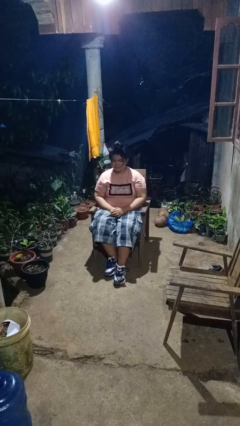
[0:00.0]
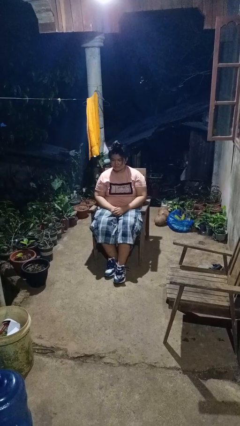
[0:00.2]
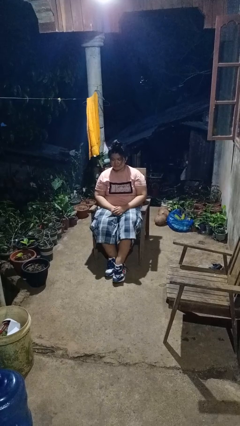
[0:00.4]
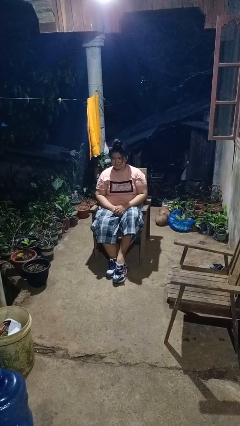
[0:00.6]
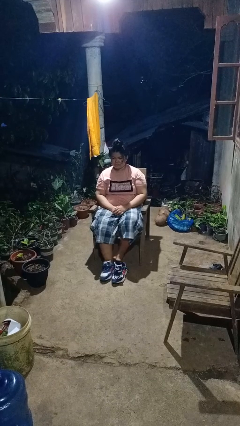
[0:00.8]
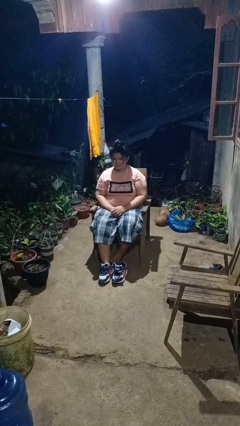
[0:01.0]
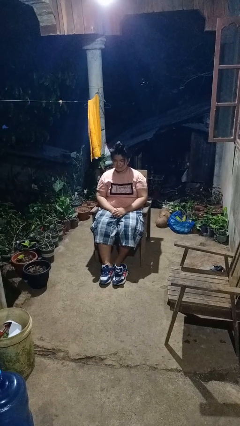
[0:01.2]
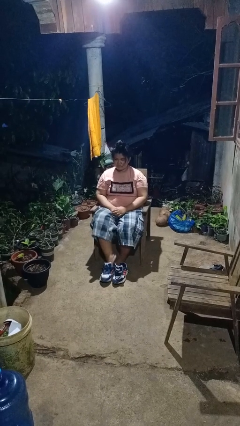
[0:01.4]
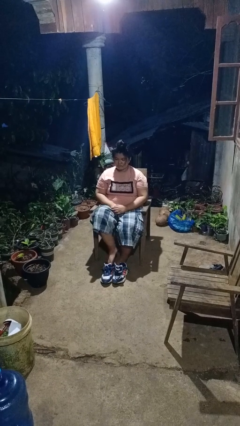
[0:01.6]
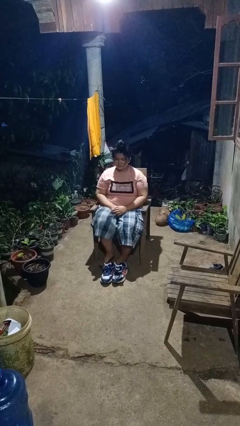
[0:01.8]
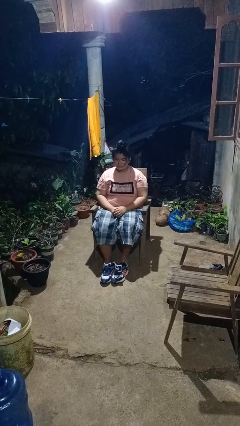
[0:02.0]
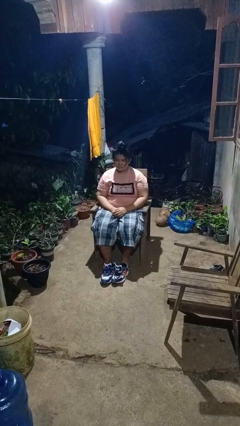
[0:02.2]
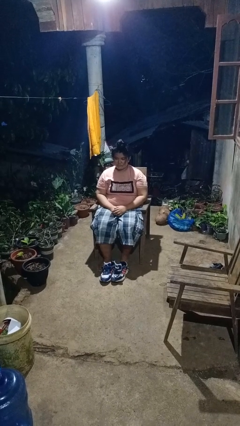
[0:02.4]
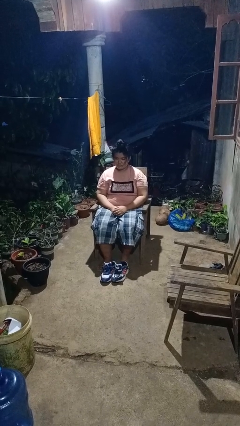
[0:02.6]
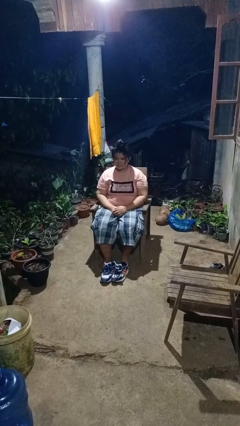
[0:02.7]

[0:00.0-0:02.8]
person takes off shoes

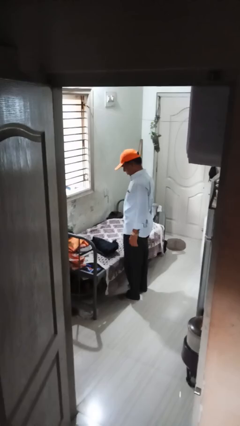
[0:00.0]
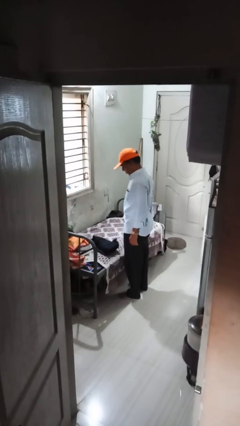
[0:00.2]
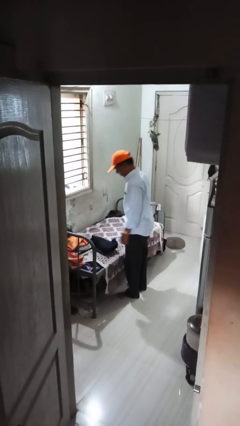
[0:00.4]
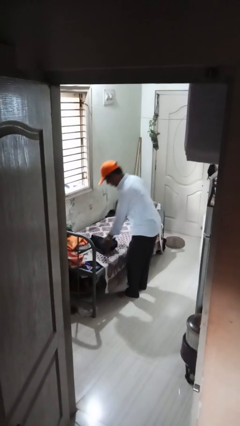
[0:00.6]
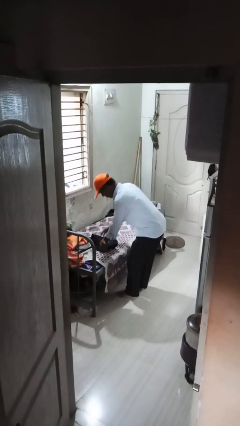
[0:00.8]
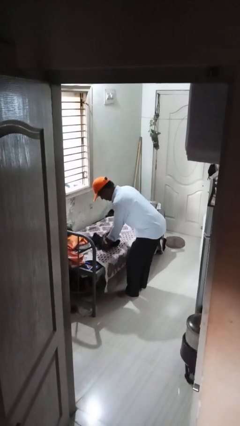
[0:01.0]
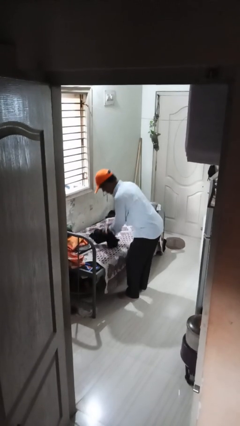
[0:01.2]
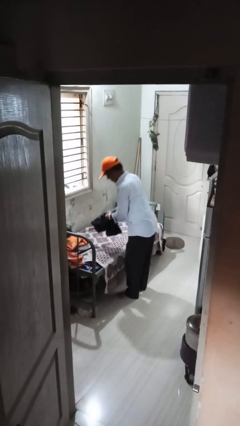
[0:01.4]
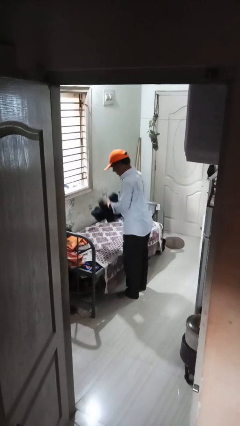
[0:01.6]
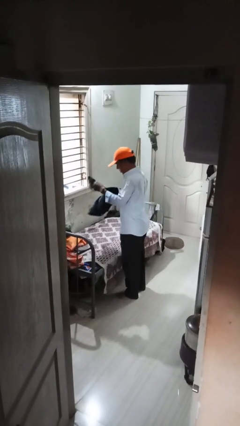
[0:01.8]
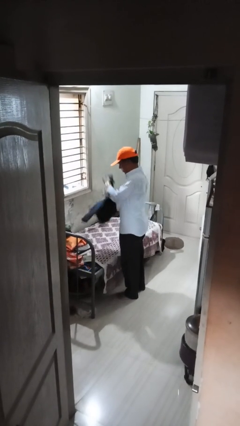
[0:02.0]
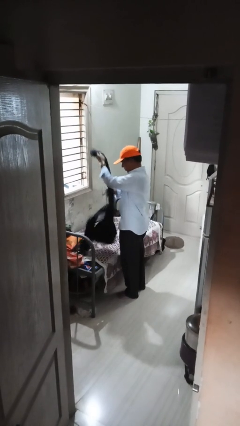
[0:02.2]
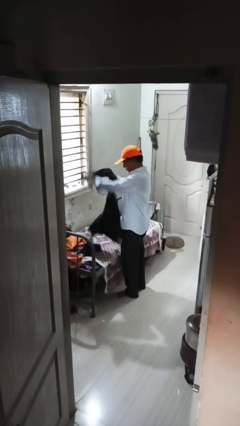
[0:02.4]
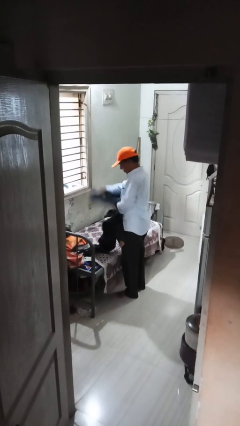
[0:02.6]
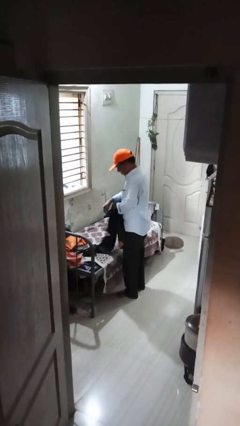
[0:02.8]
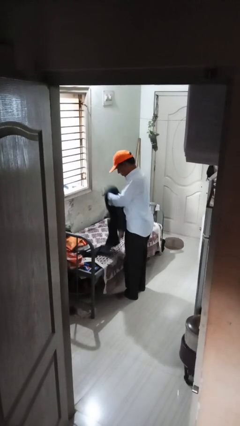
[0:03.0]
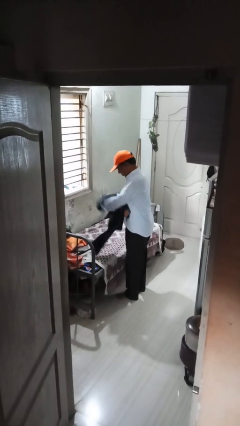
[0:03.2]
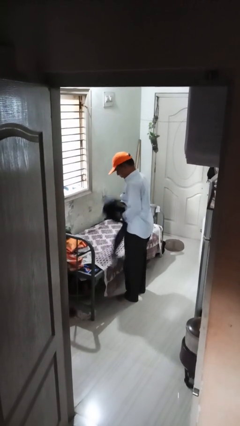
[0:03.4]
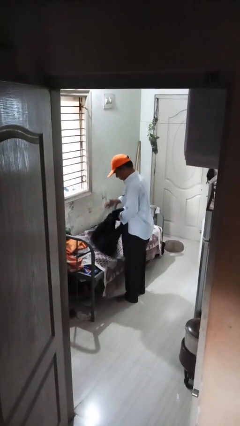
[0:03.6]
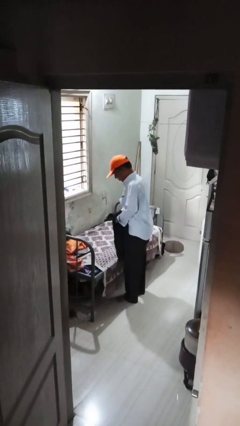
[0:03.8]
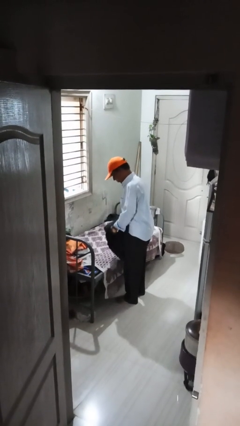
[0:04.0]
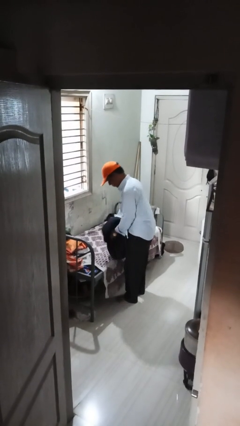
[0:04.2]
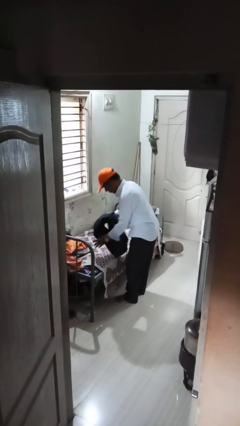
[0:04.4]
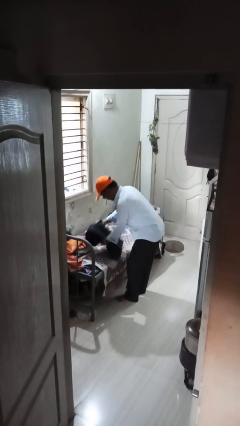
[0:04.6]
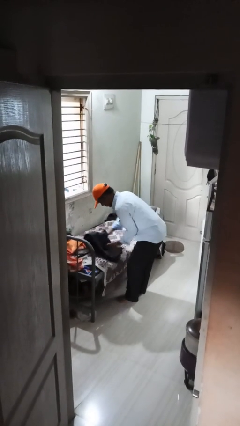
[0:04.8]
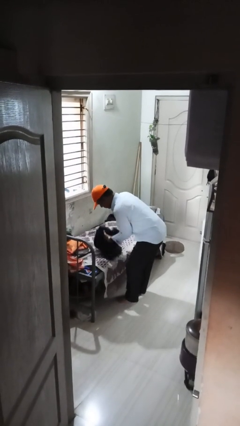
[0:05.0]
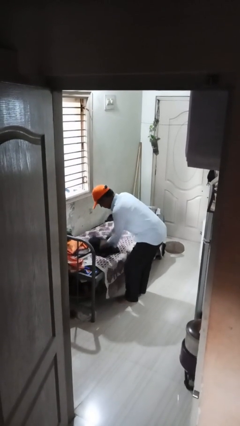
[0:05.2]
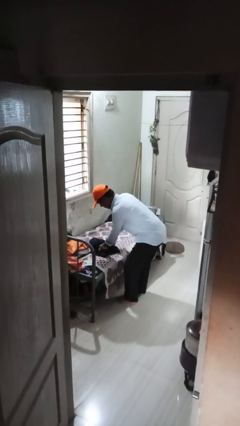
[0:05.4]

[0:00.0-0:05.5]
person folds pants

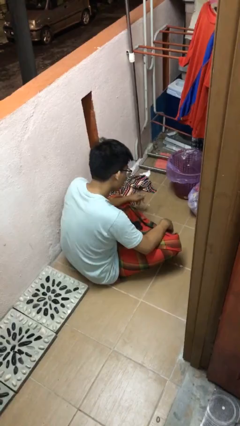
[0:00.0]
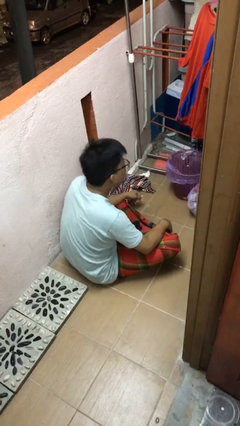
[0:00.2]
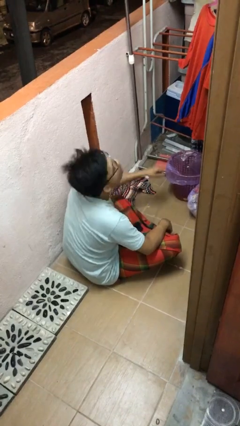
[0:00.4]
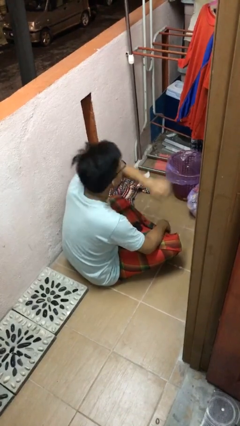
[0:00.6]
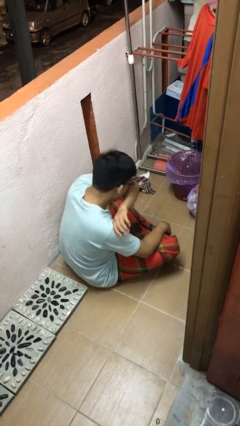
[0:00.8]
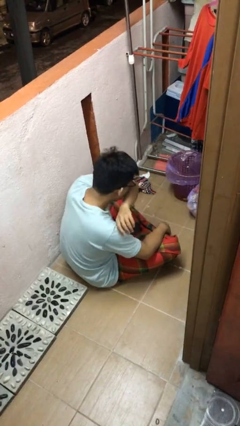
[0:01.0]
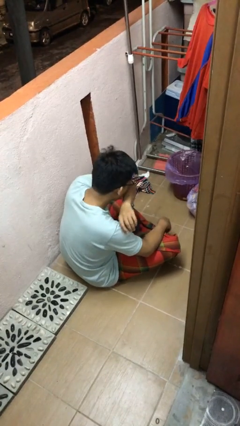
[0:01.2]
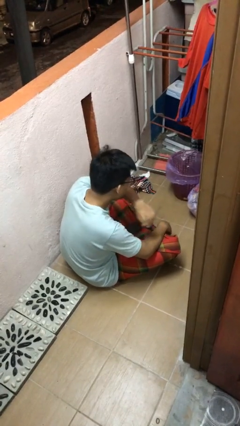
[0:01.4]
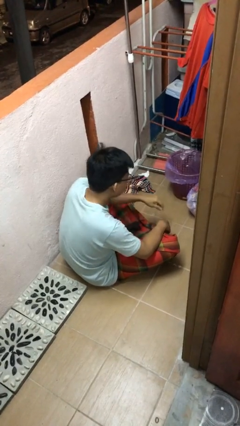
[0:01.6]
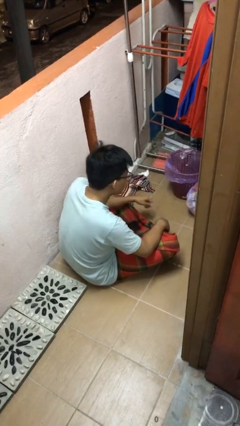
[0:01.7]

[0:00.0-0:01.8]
person sneezes into arm

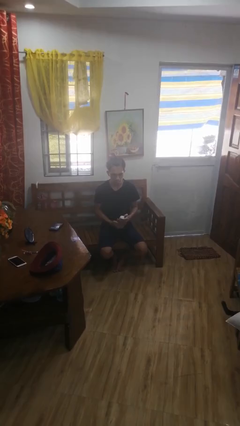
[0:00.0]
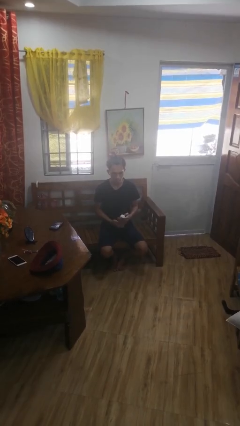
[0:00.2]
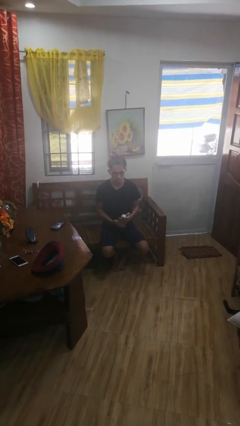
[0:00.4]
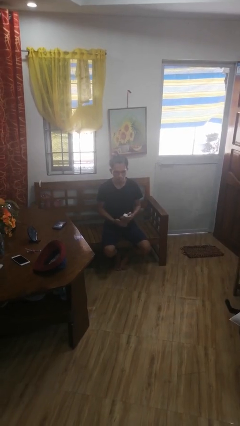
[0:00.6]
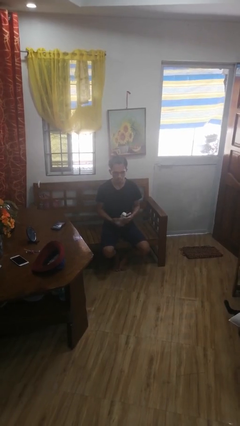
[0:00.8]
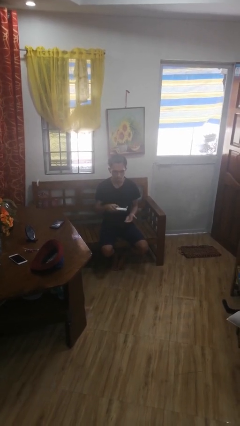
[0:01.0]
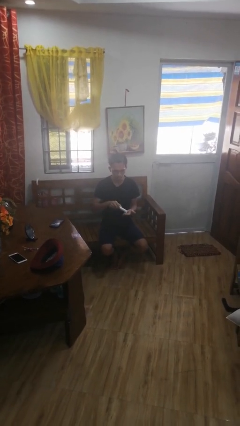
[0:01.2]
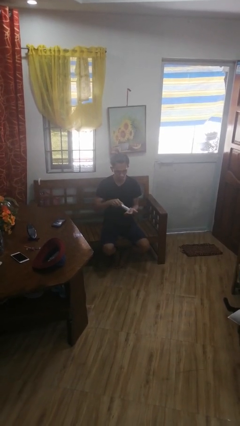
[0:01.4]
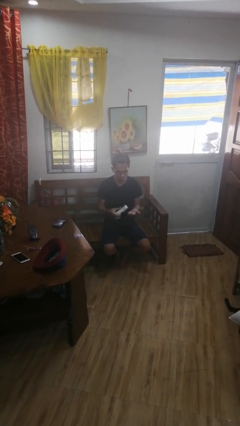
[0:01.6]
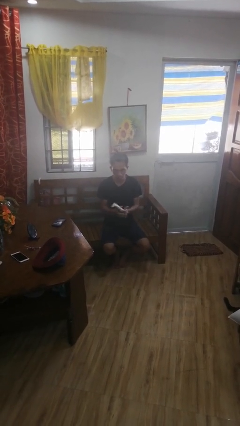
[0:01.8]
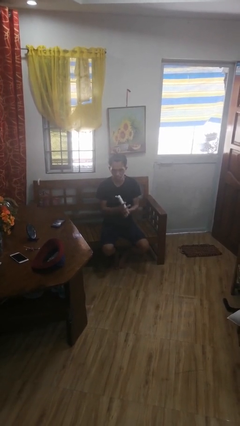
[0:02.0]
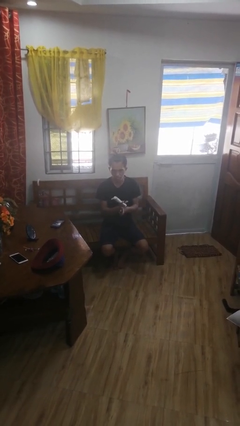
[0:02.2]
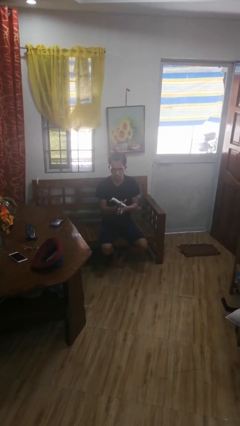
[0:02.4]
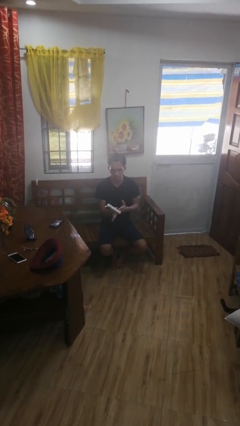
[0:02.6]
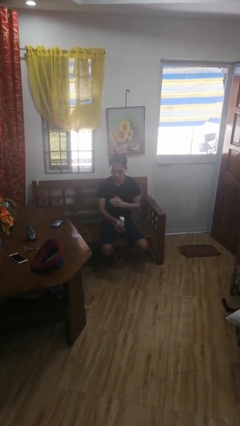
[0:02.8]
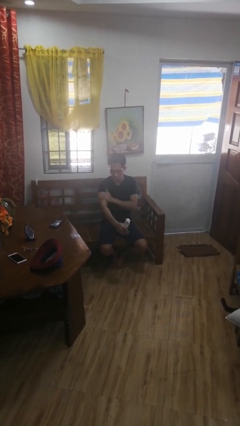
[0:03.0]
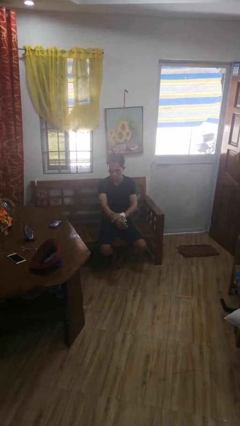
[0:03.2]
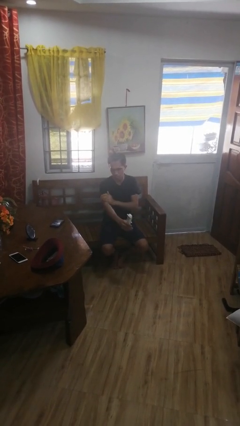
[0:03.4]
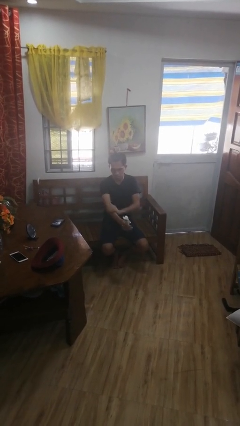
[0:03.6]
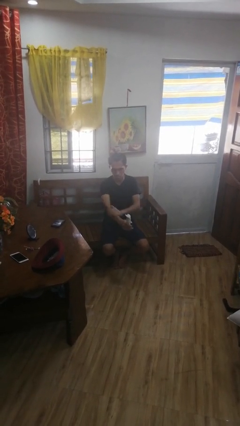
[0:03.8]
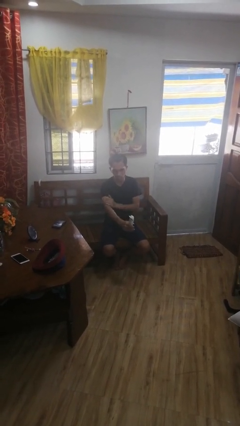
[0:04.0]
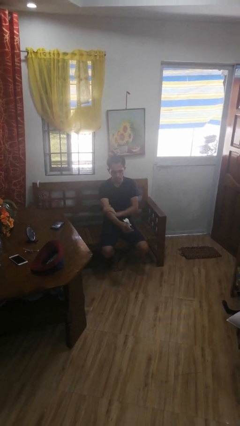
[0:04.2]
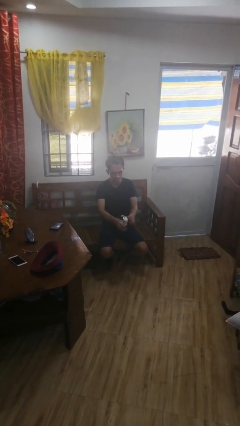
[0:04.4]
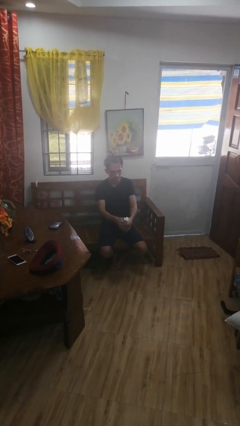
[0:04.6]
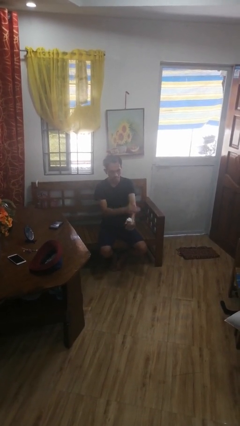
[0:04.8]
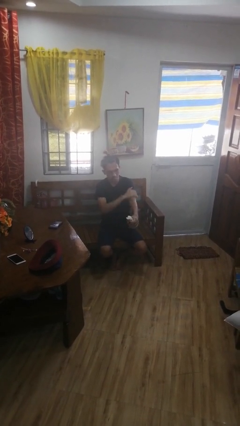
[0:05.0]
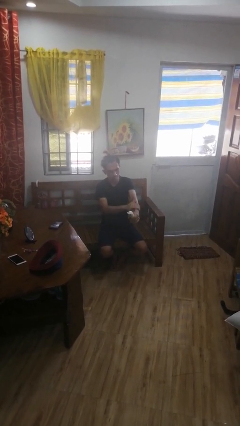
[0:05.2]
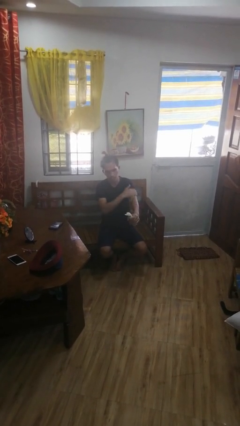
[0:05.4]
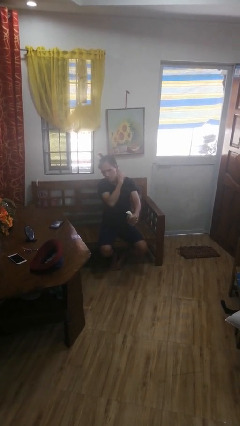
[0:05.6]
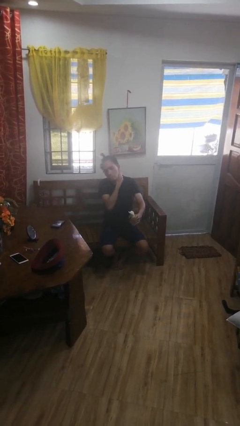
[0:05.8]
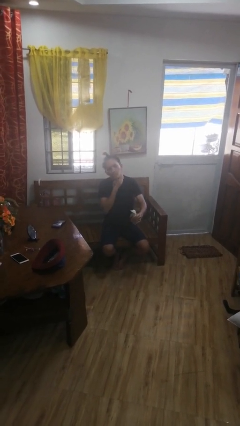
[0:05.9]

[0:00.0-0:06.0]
person applies sunscreen

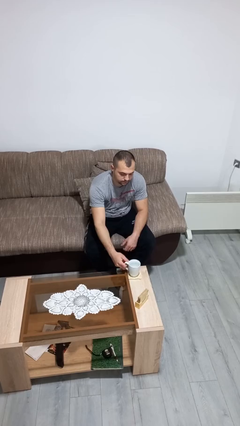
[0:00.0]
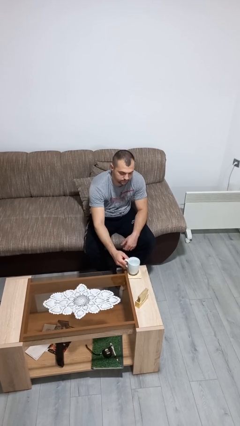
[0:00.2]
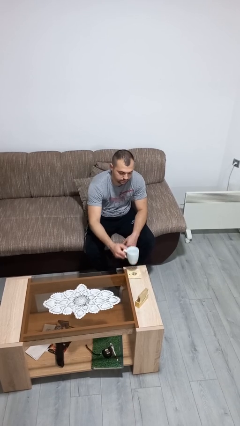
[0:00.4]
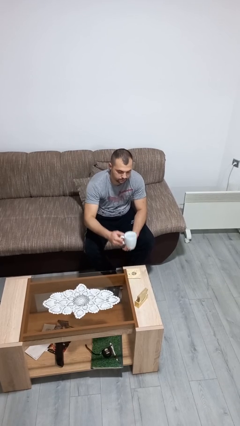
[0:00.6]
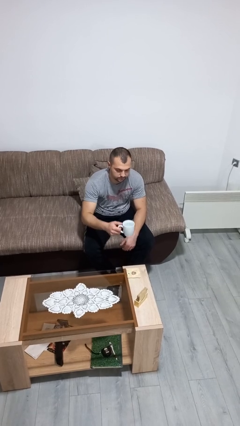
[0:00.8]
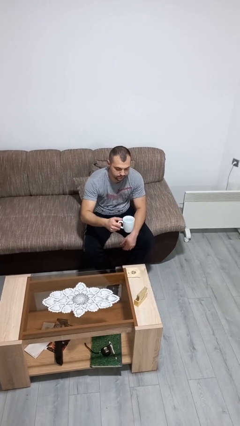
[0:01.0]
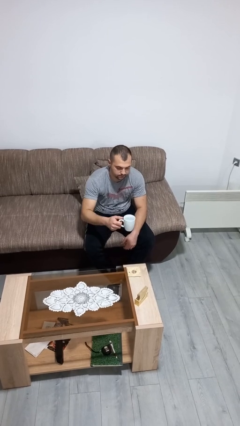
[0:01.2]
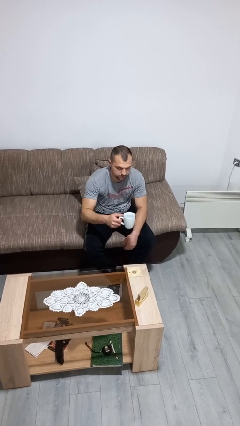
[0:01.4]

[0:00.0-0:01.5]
person picks up object from table
